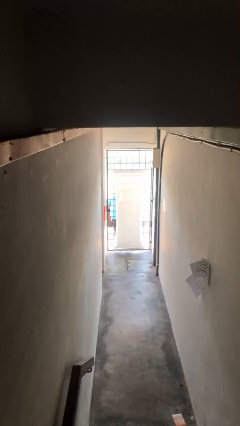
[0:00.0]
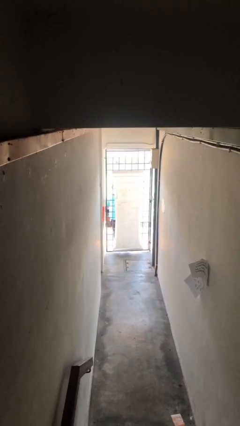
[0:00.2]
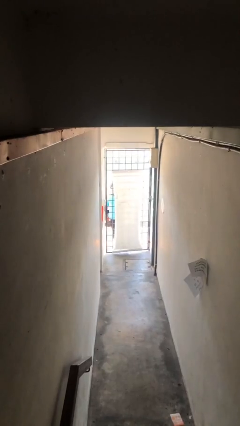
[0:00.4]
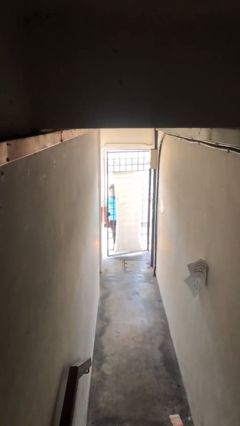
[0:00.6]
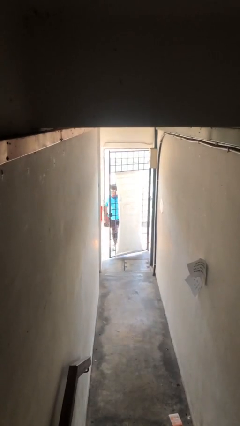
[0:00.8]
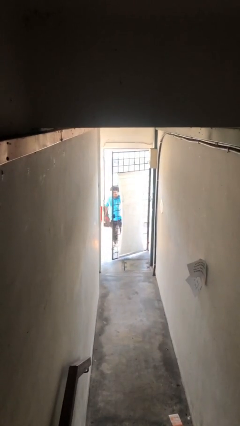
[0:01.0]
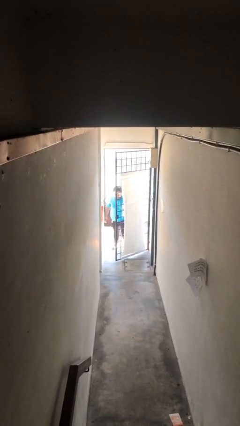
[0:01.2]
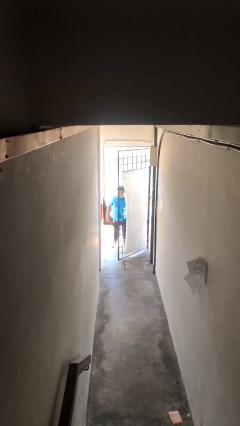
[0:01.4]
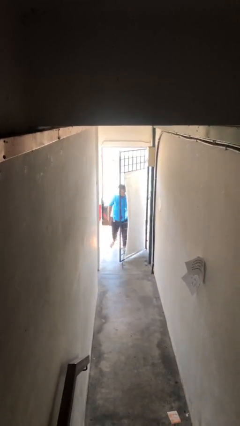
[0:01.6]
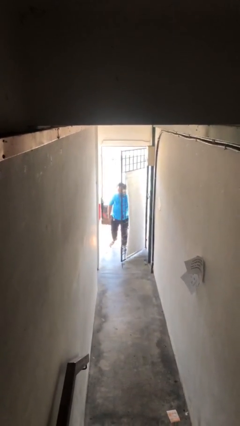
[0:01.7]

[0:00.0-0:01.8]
person opens facility door

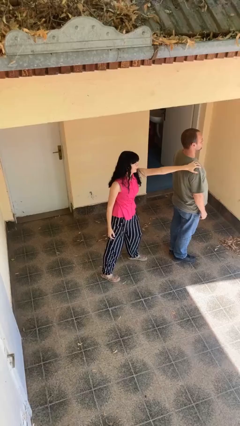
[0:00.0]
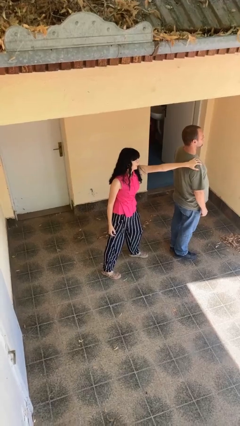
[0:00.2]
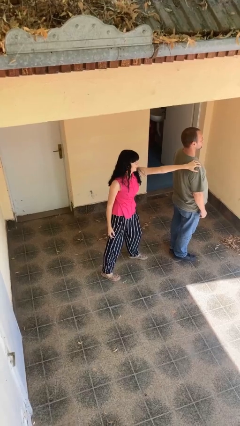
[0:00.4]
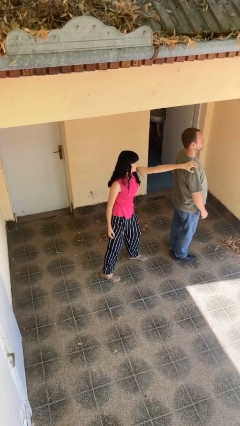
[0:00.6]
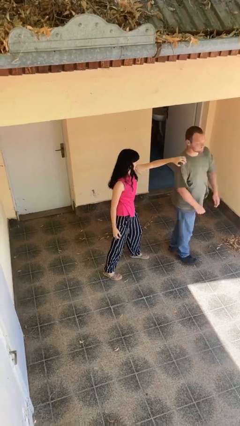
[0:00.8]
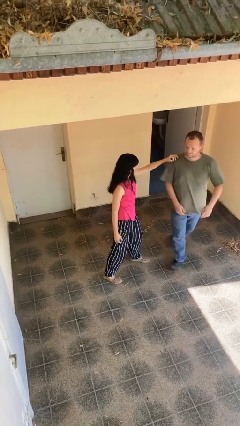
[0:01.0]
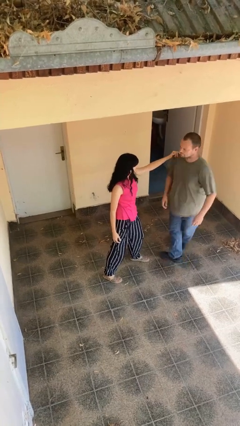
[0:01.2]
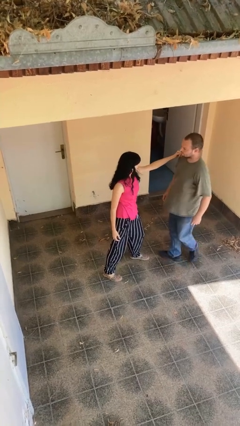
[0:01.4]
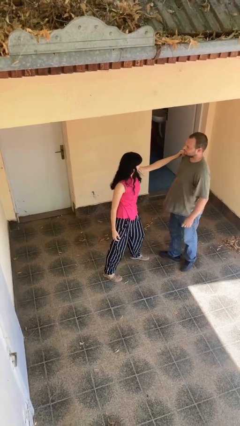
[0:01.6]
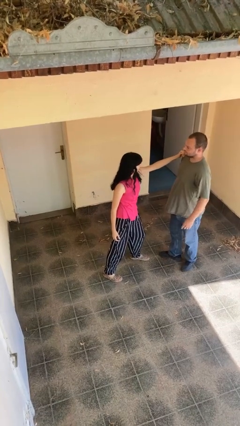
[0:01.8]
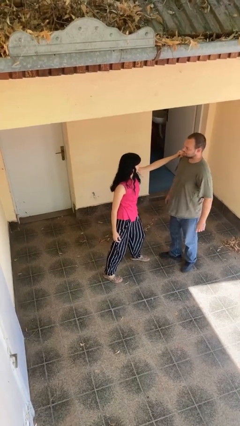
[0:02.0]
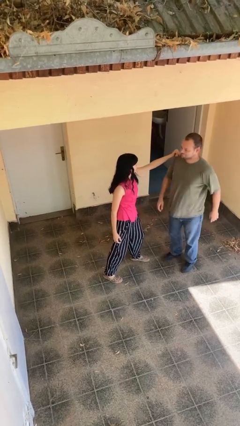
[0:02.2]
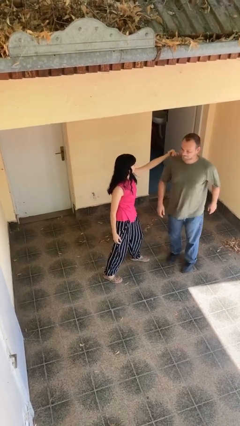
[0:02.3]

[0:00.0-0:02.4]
person spins person around

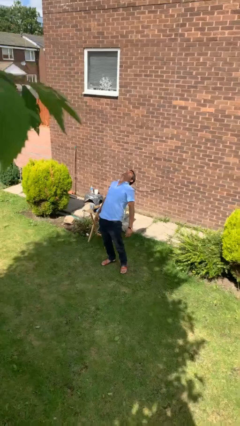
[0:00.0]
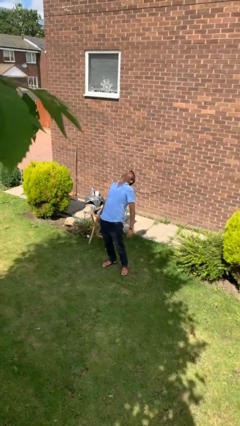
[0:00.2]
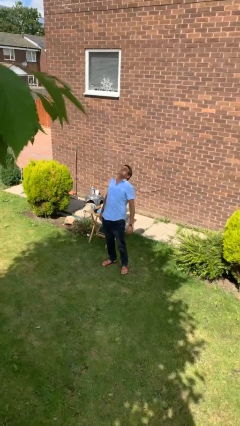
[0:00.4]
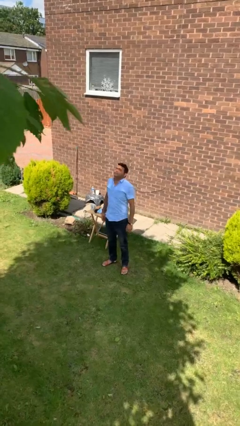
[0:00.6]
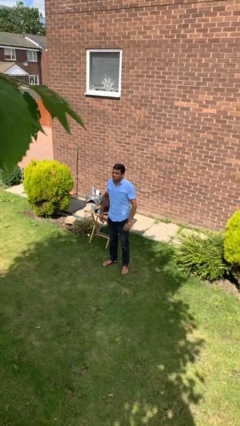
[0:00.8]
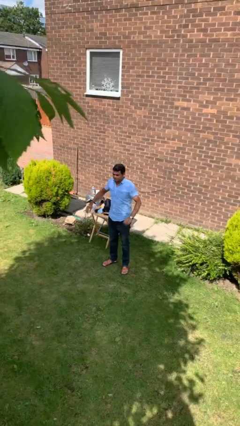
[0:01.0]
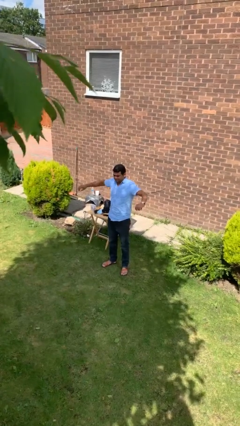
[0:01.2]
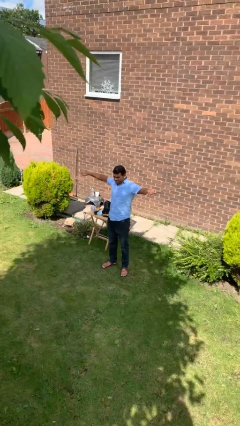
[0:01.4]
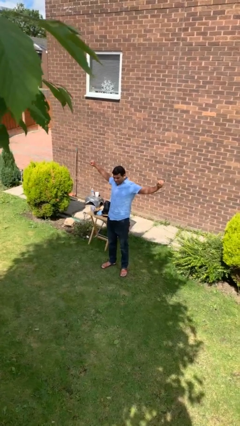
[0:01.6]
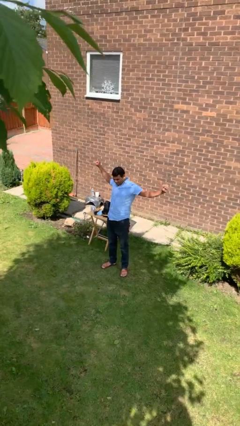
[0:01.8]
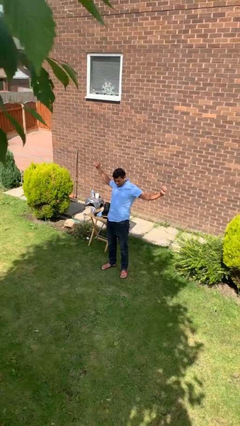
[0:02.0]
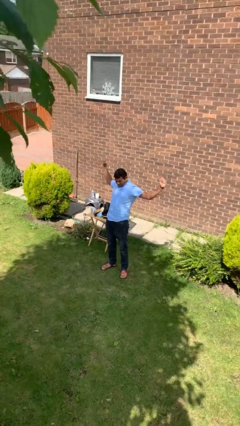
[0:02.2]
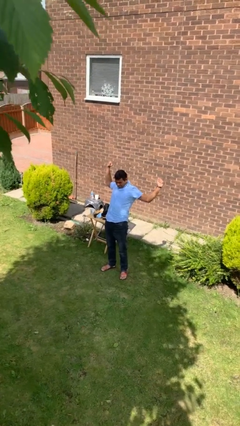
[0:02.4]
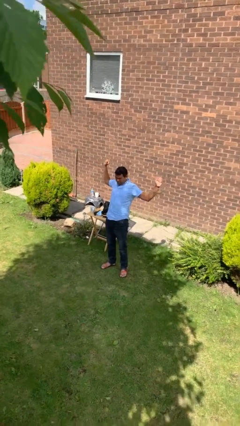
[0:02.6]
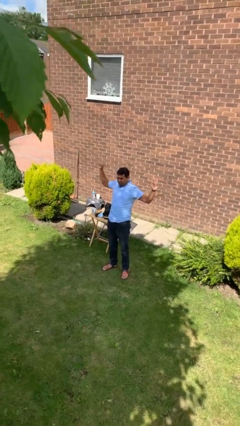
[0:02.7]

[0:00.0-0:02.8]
person stretches arms to side

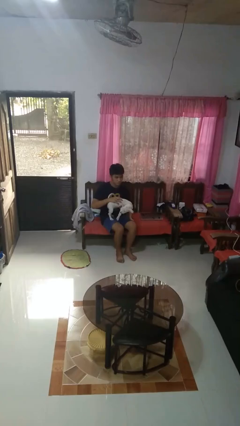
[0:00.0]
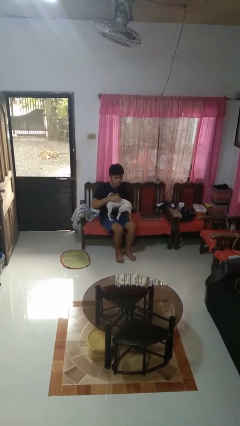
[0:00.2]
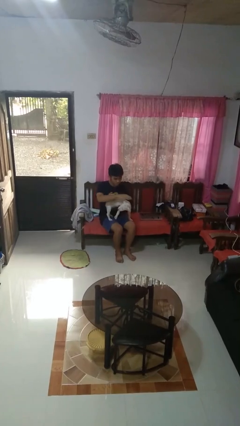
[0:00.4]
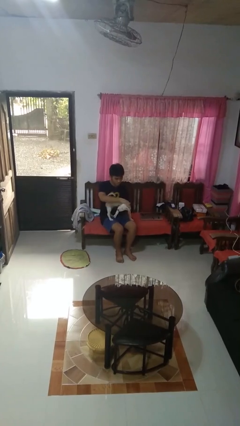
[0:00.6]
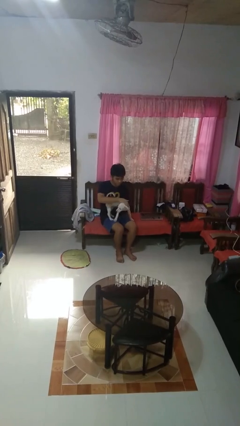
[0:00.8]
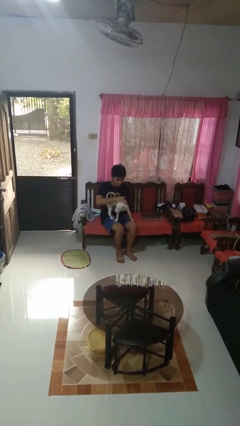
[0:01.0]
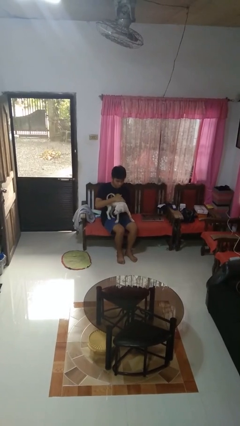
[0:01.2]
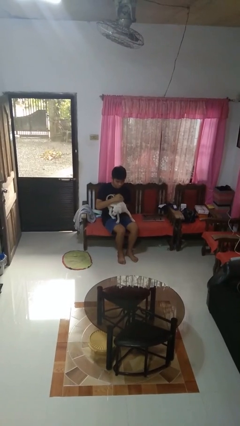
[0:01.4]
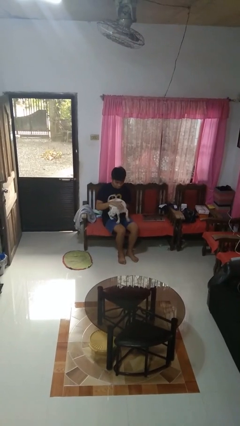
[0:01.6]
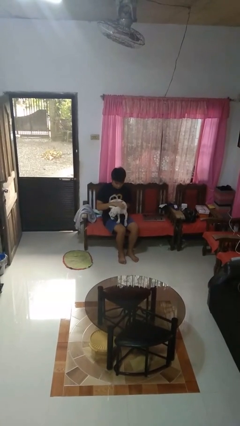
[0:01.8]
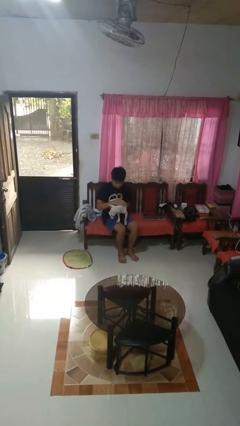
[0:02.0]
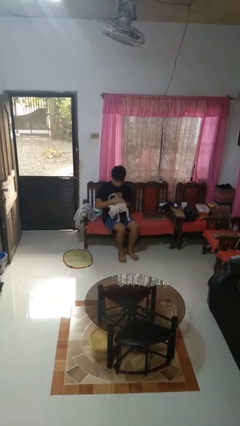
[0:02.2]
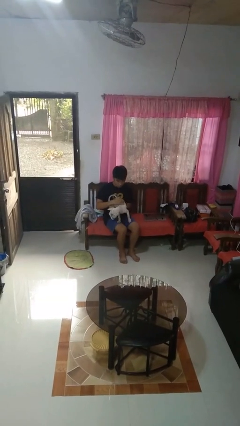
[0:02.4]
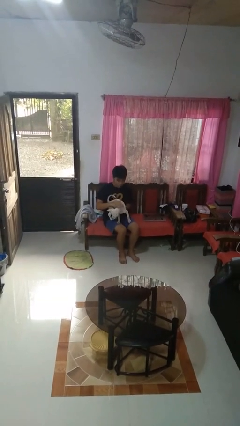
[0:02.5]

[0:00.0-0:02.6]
person pets dog

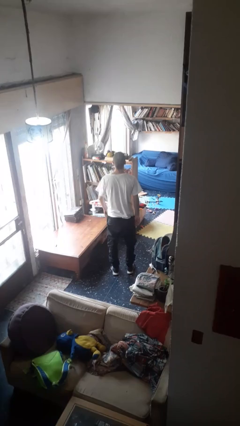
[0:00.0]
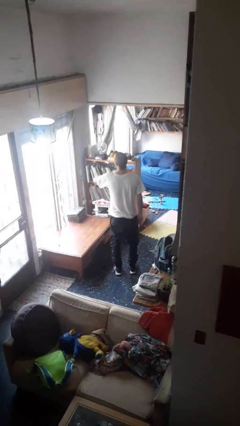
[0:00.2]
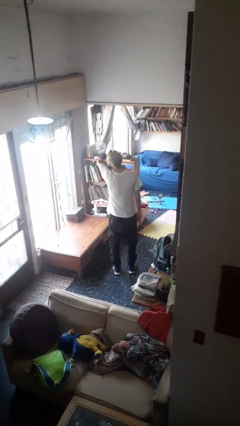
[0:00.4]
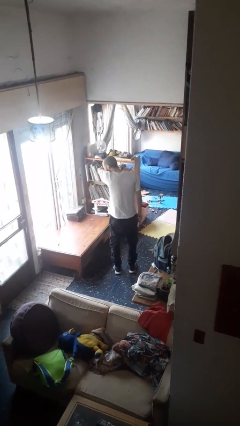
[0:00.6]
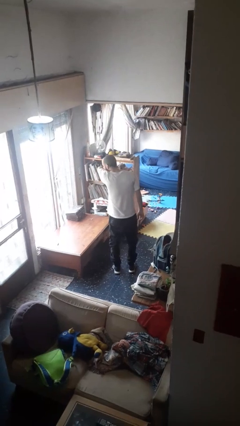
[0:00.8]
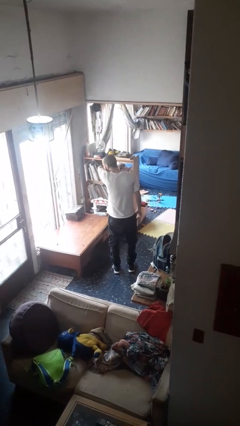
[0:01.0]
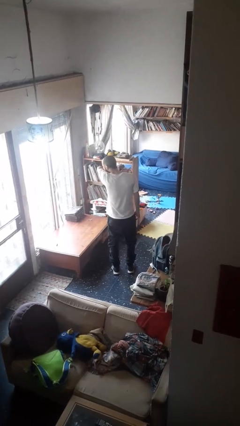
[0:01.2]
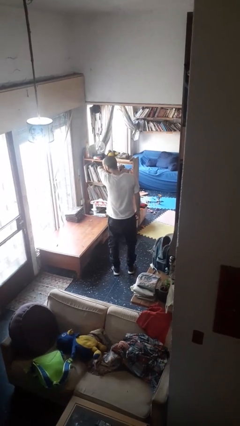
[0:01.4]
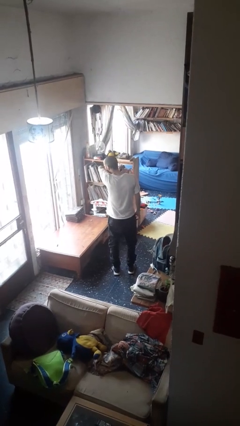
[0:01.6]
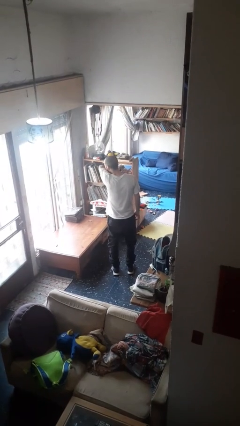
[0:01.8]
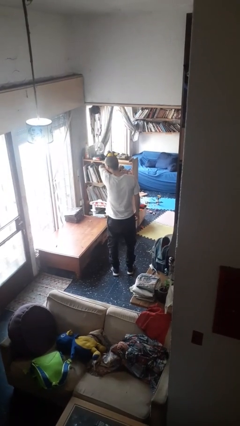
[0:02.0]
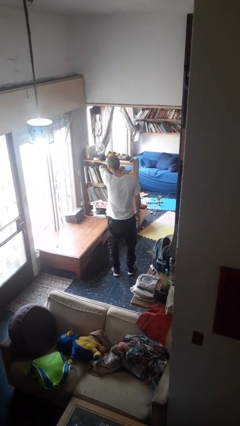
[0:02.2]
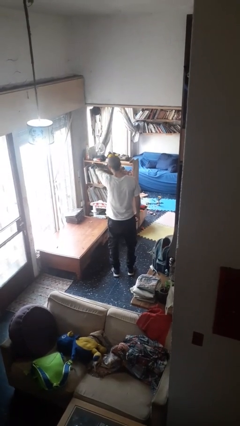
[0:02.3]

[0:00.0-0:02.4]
person sneezes into arm

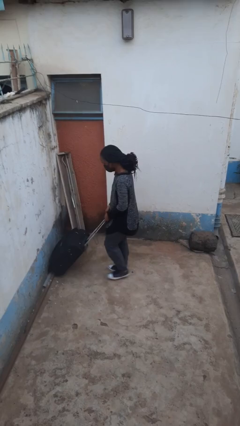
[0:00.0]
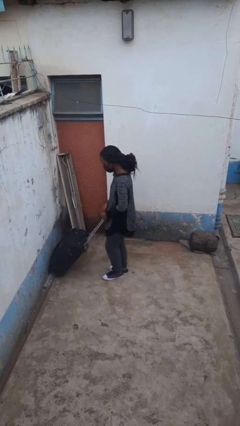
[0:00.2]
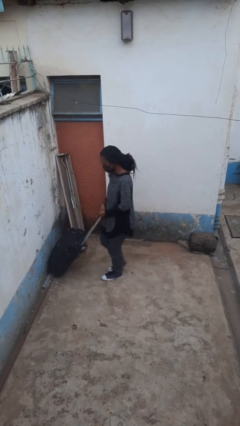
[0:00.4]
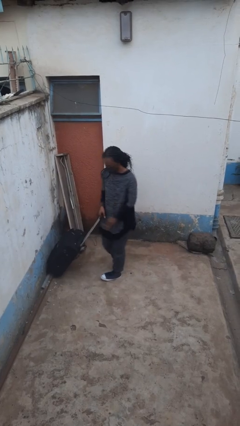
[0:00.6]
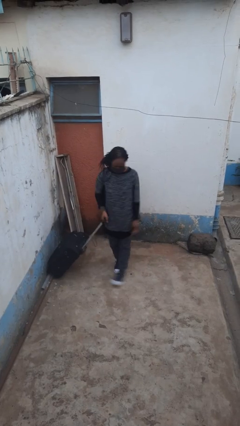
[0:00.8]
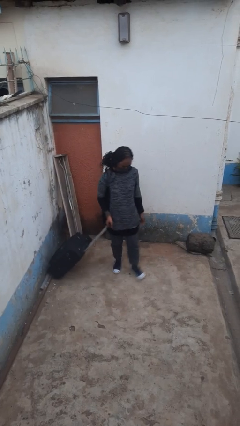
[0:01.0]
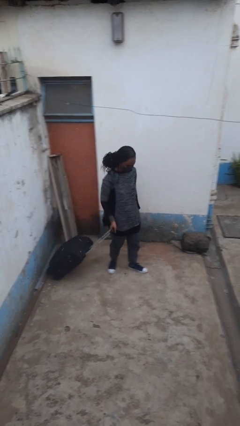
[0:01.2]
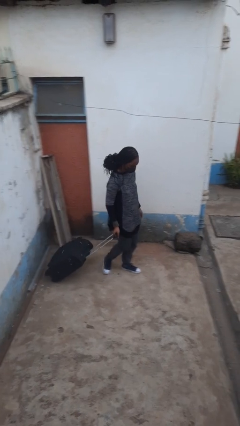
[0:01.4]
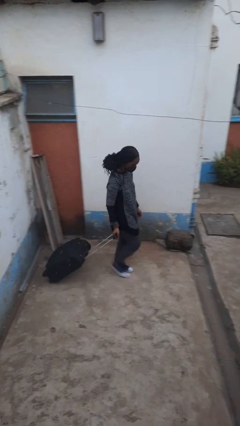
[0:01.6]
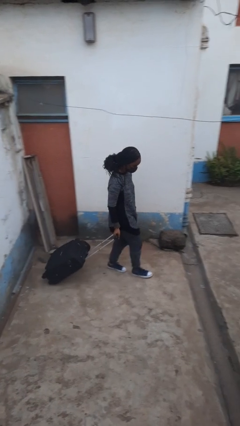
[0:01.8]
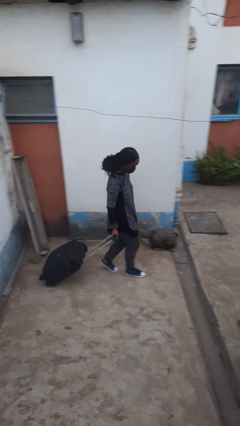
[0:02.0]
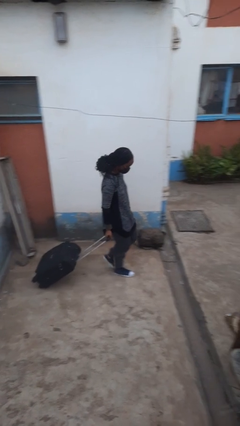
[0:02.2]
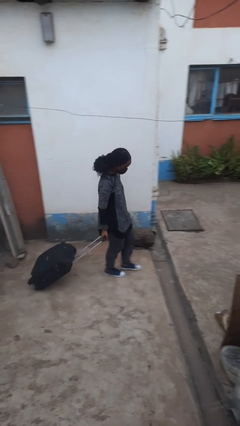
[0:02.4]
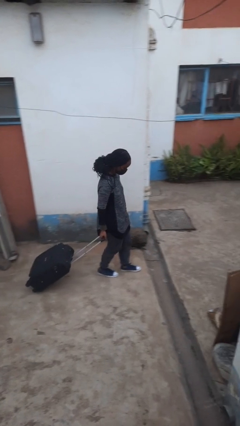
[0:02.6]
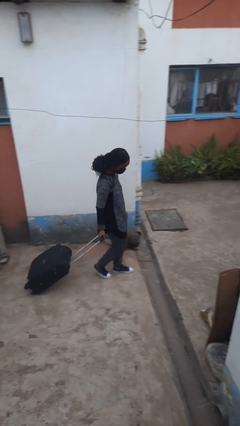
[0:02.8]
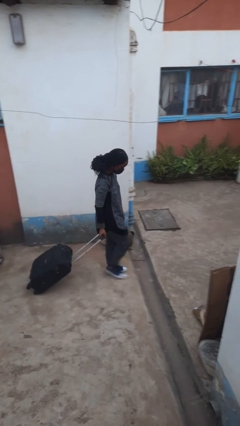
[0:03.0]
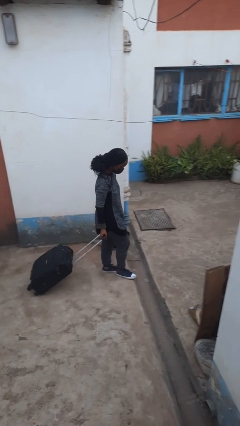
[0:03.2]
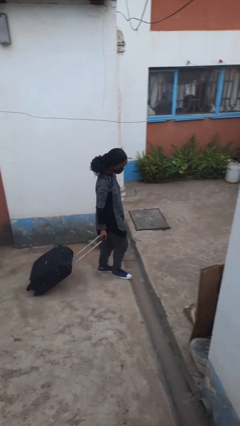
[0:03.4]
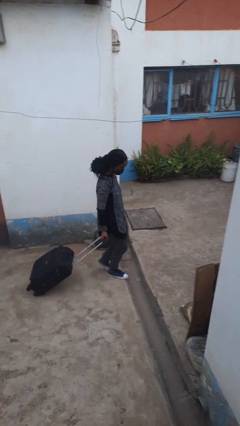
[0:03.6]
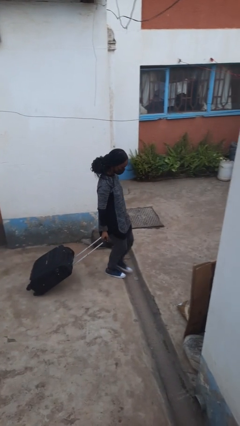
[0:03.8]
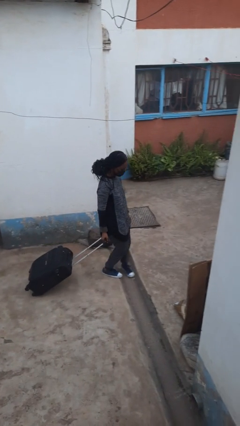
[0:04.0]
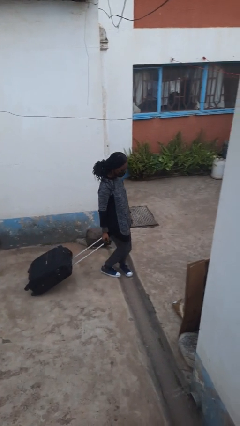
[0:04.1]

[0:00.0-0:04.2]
person pulls wheeled cart

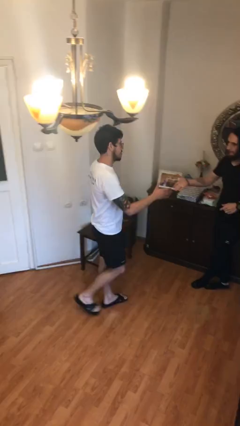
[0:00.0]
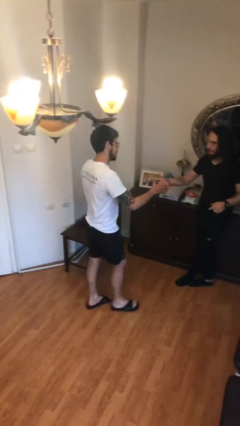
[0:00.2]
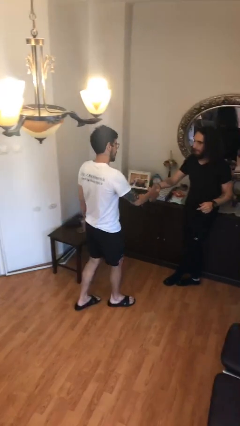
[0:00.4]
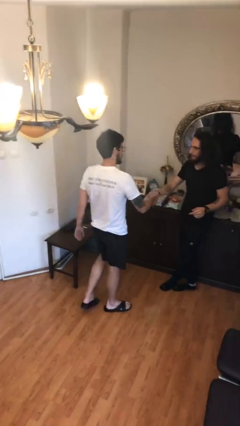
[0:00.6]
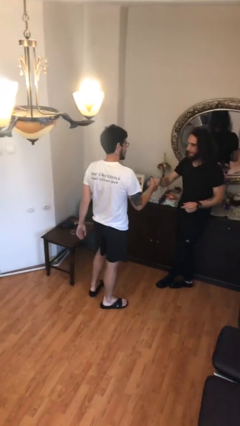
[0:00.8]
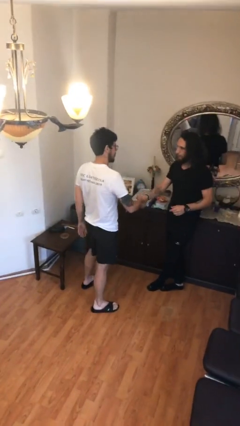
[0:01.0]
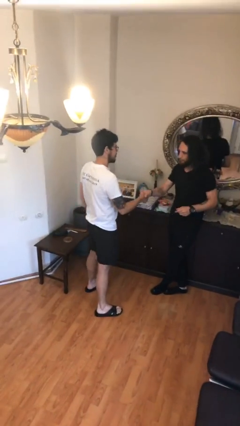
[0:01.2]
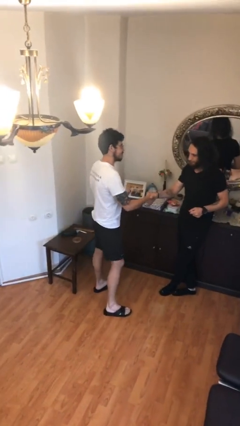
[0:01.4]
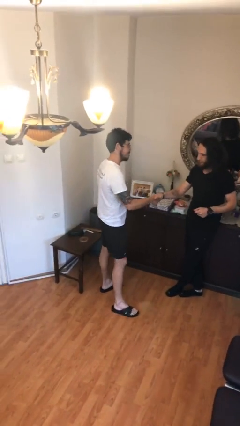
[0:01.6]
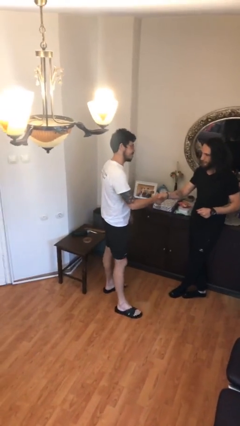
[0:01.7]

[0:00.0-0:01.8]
person shakes hand
